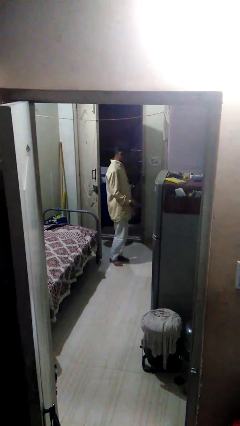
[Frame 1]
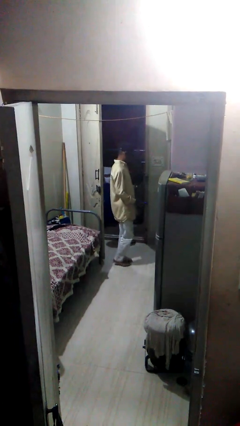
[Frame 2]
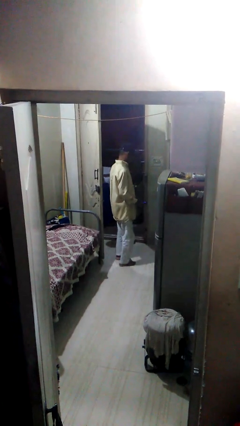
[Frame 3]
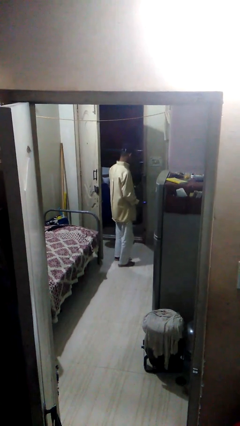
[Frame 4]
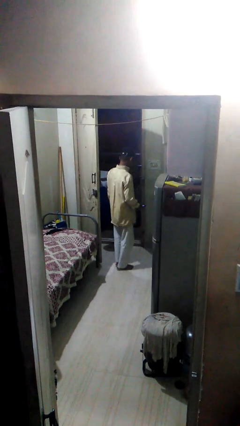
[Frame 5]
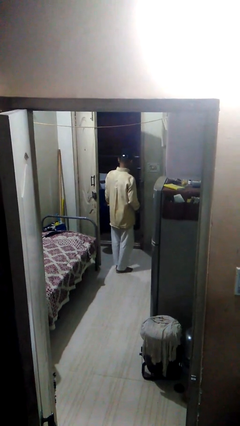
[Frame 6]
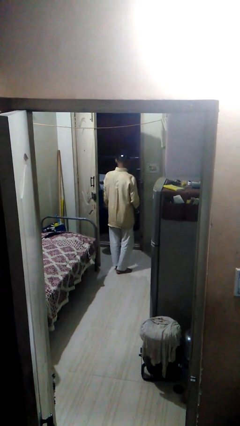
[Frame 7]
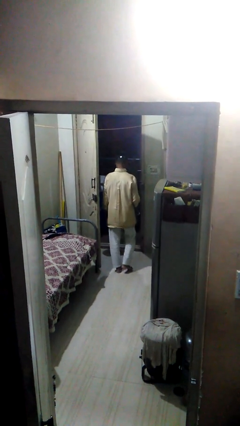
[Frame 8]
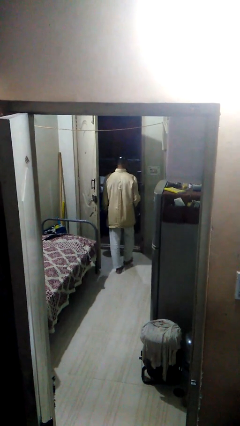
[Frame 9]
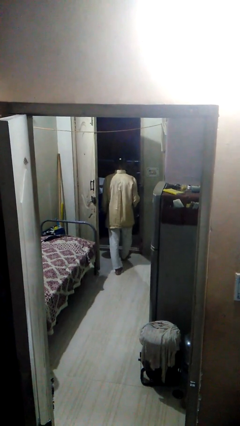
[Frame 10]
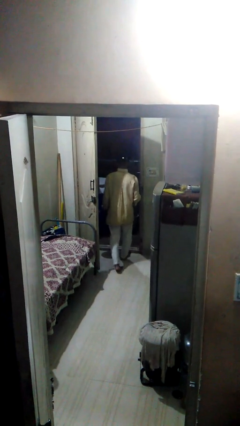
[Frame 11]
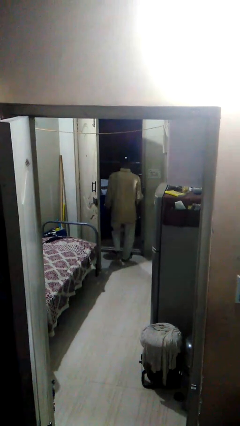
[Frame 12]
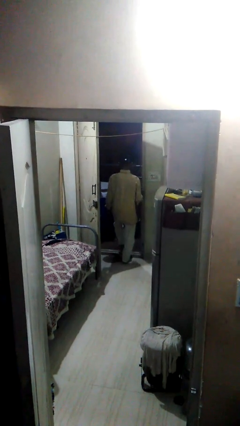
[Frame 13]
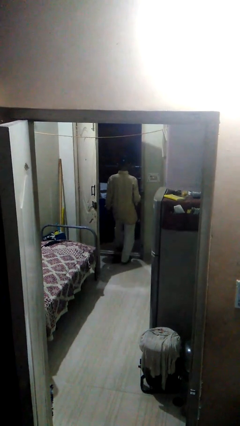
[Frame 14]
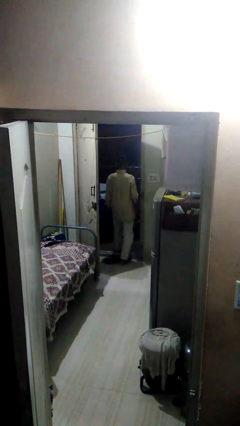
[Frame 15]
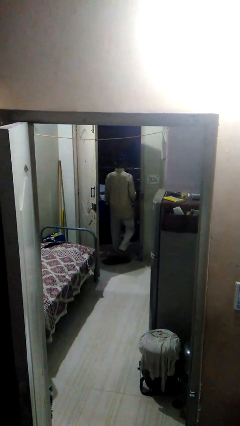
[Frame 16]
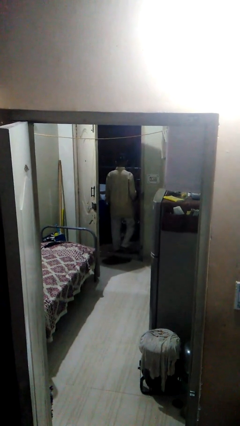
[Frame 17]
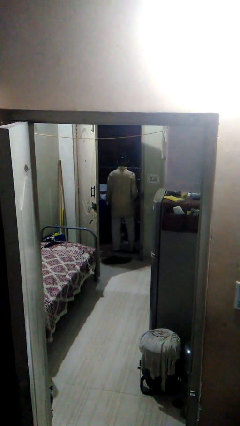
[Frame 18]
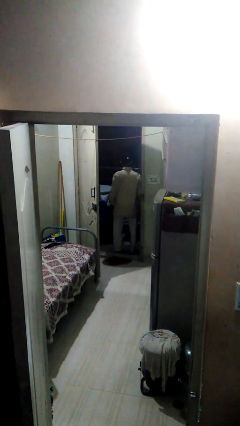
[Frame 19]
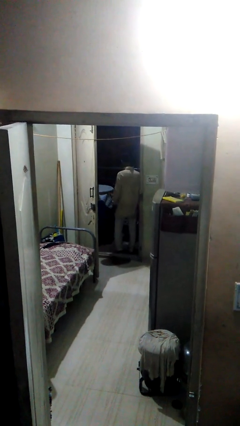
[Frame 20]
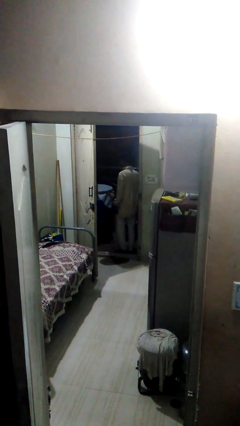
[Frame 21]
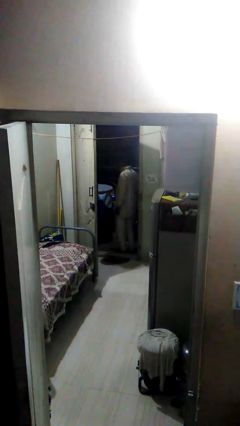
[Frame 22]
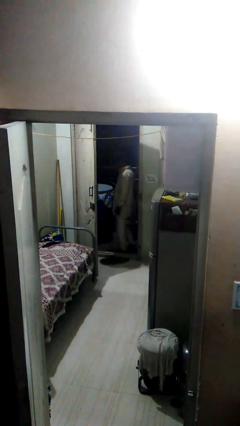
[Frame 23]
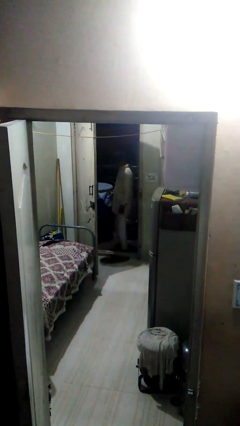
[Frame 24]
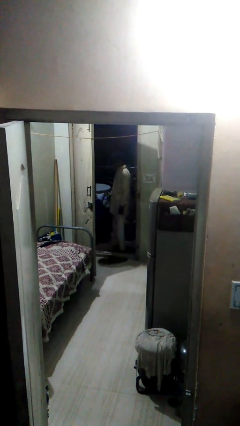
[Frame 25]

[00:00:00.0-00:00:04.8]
person exits scene through structure

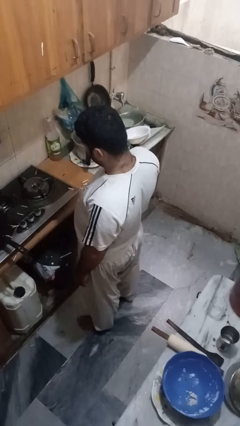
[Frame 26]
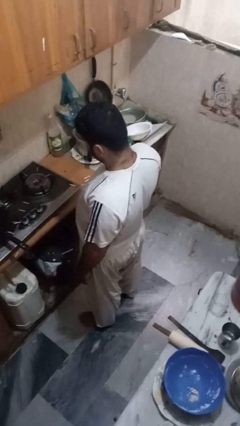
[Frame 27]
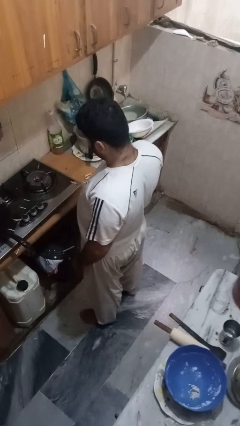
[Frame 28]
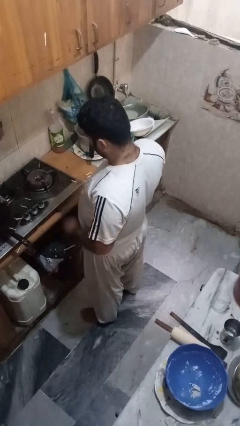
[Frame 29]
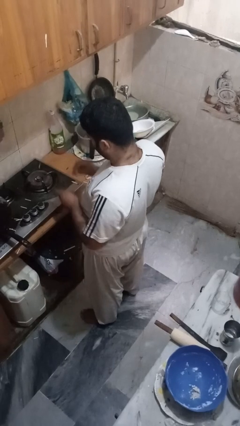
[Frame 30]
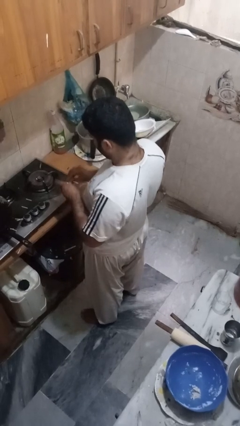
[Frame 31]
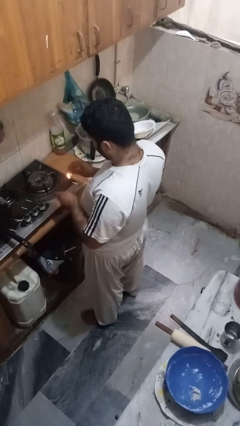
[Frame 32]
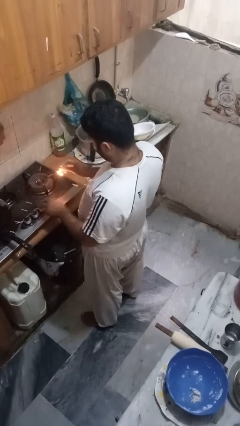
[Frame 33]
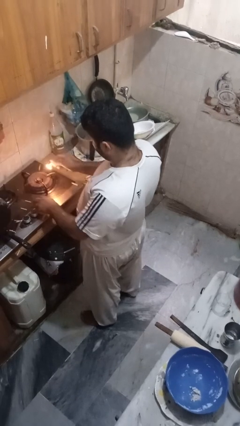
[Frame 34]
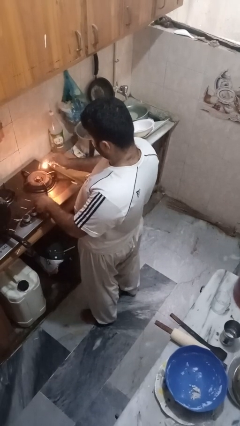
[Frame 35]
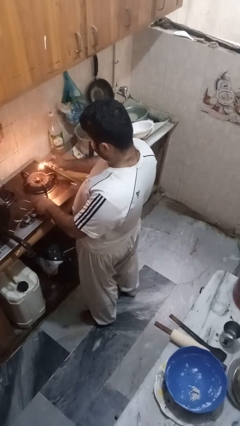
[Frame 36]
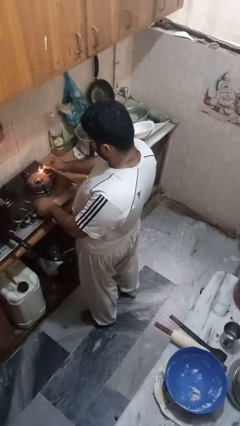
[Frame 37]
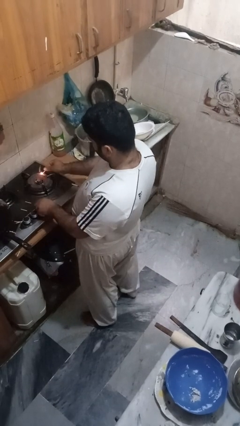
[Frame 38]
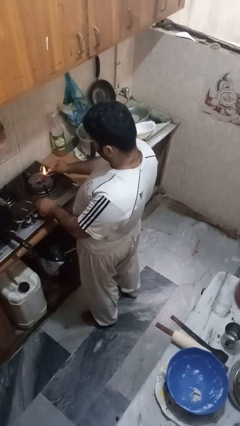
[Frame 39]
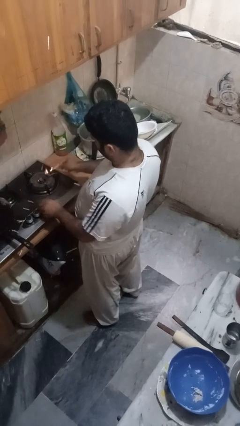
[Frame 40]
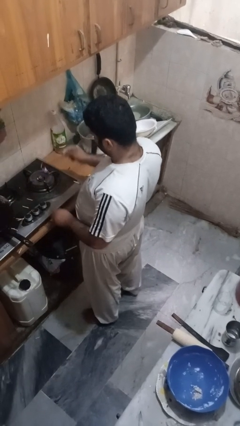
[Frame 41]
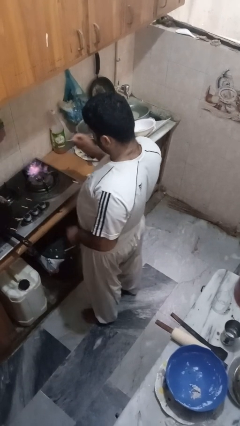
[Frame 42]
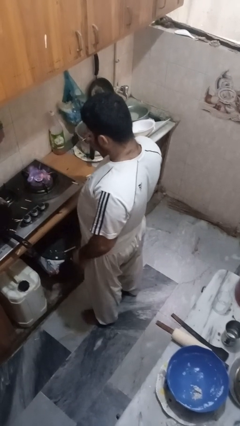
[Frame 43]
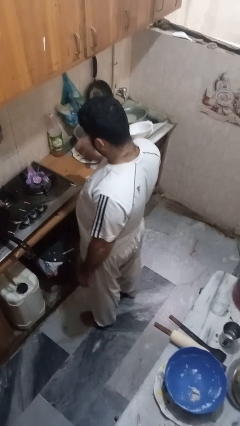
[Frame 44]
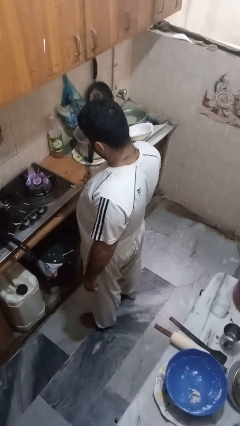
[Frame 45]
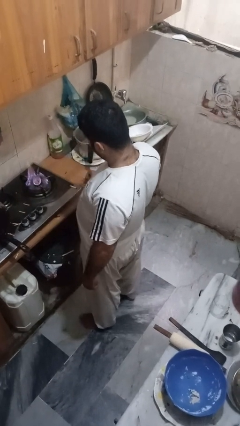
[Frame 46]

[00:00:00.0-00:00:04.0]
person turns on stovetop

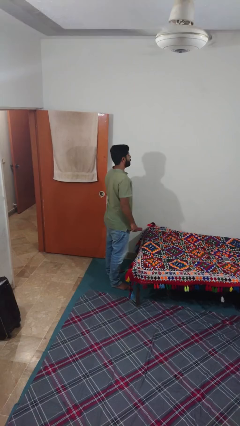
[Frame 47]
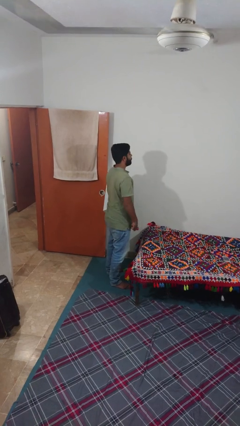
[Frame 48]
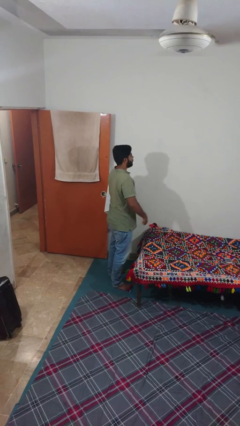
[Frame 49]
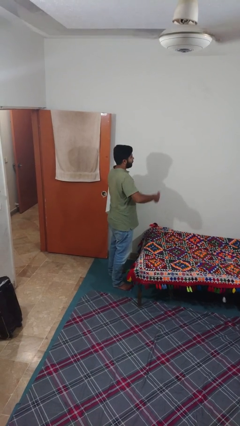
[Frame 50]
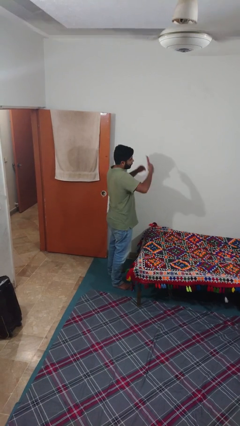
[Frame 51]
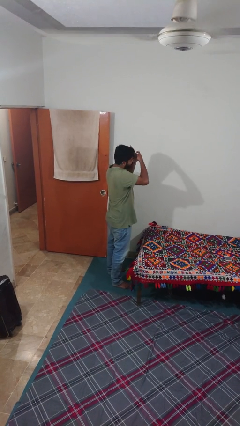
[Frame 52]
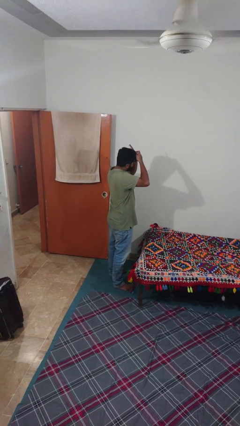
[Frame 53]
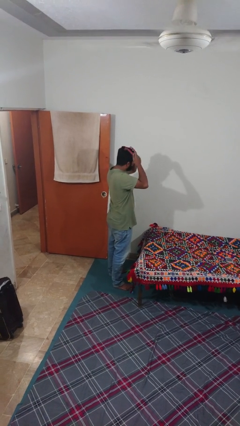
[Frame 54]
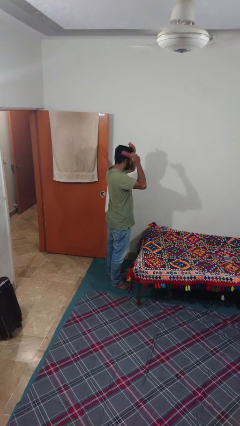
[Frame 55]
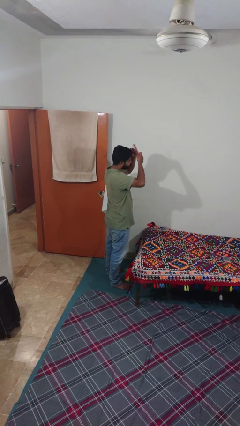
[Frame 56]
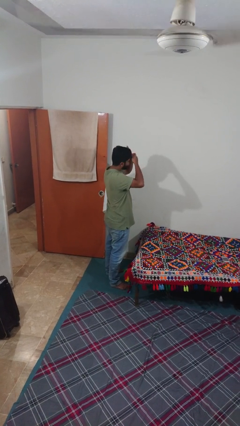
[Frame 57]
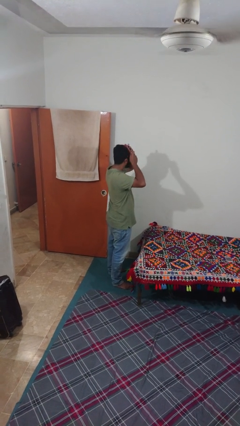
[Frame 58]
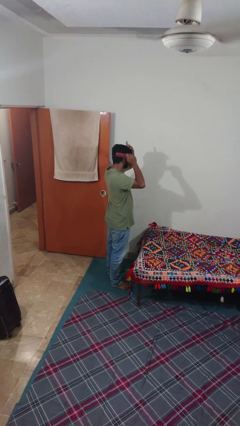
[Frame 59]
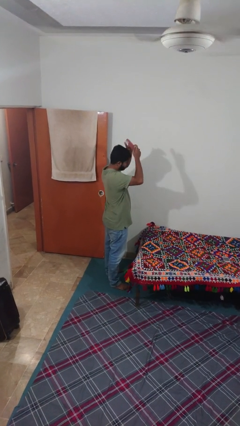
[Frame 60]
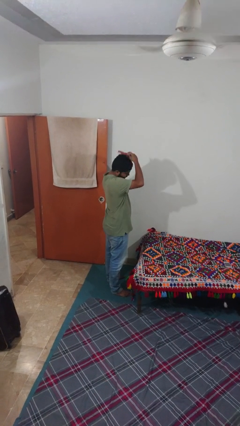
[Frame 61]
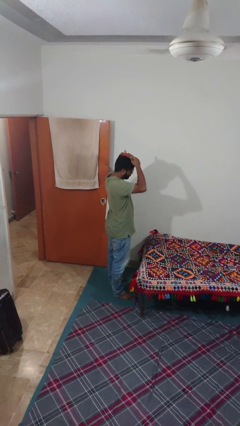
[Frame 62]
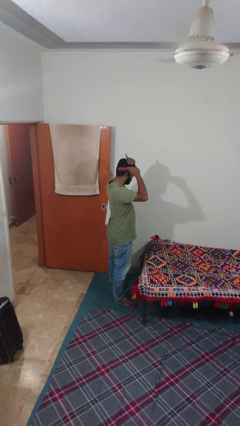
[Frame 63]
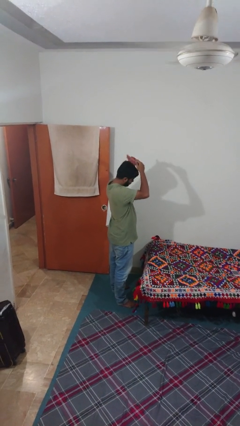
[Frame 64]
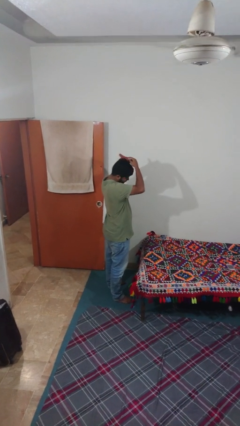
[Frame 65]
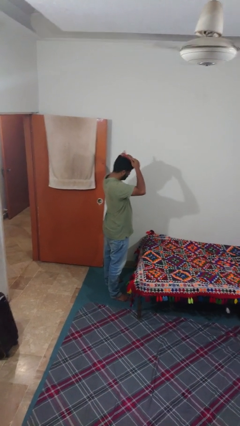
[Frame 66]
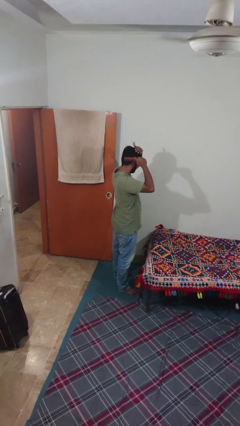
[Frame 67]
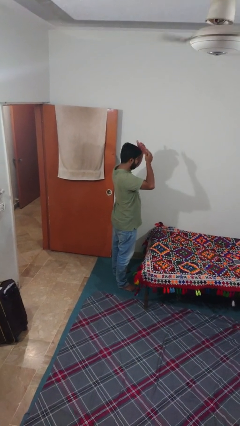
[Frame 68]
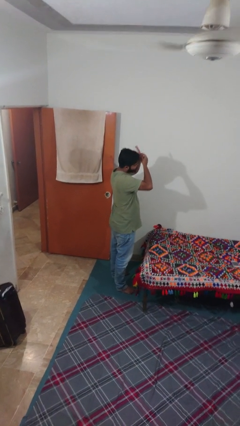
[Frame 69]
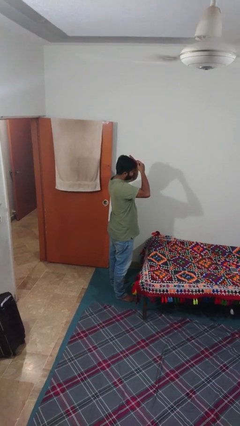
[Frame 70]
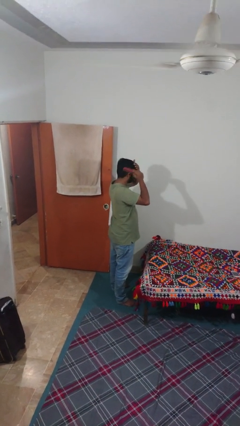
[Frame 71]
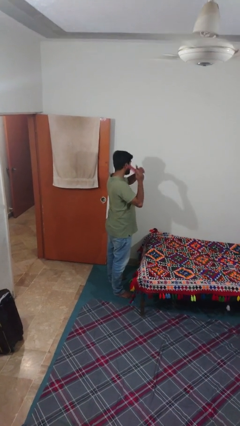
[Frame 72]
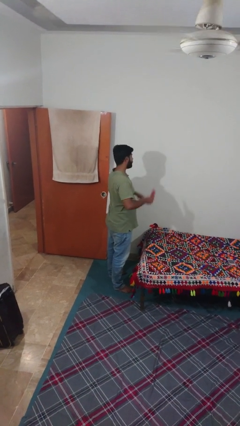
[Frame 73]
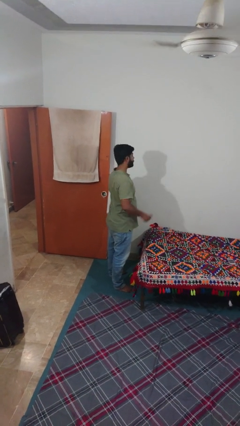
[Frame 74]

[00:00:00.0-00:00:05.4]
person brushes hair

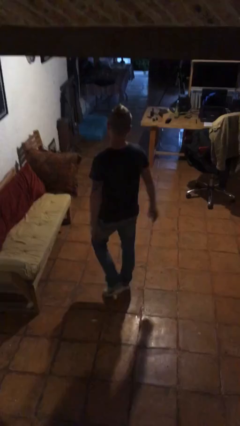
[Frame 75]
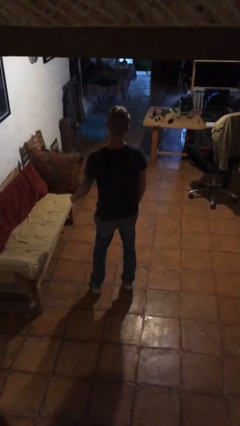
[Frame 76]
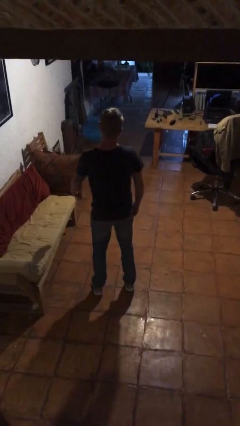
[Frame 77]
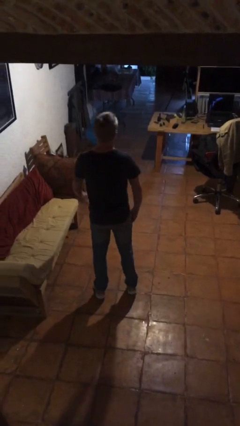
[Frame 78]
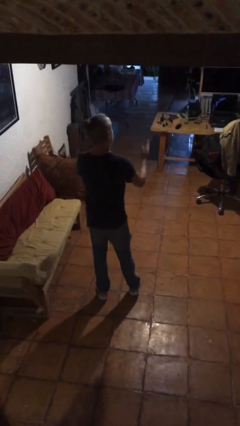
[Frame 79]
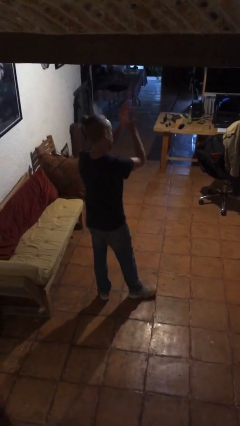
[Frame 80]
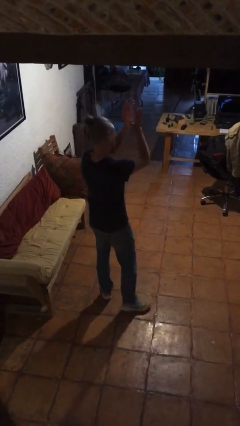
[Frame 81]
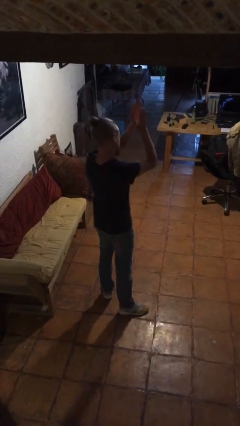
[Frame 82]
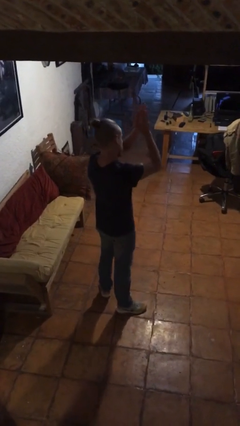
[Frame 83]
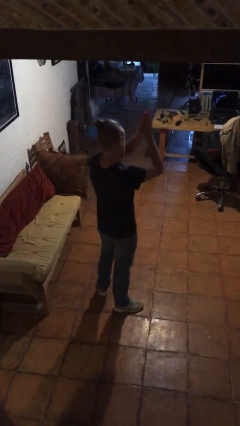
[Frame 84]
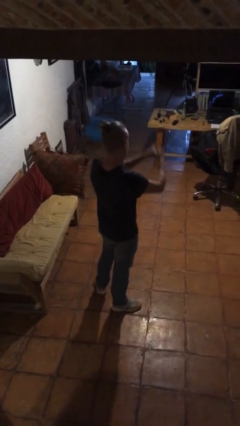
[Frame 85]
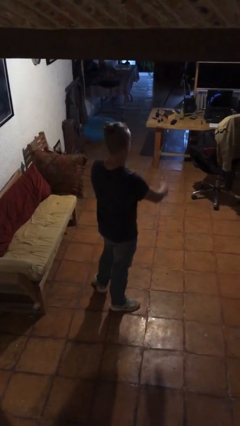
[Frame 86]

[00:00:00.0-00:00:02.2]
person claps hands

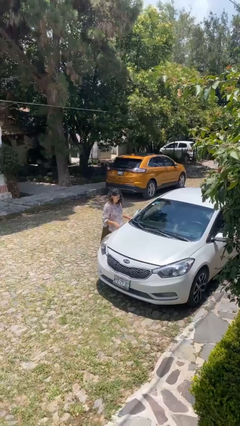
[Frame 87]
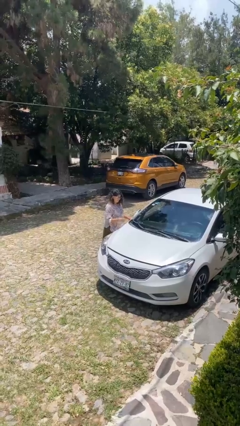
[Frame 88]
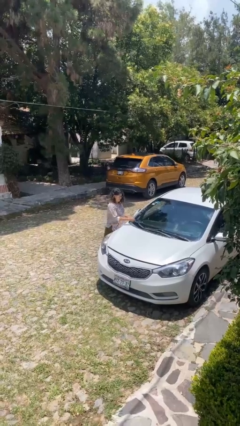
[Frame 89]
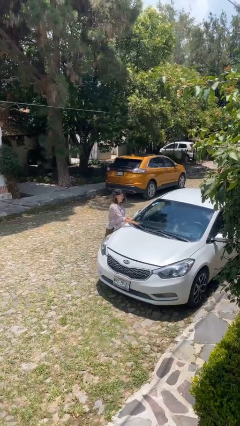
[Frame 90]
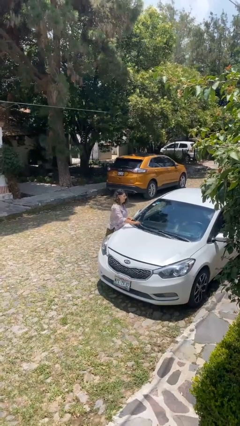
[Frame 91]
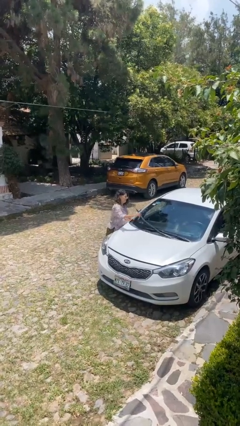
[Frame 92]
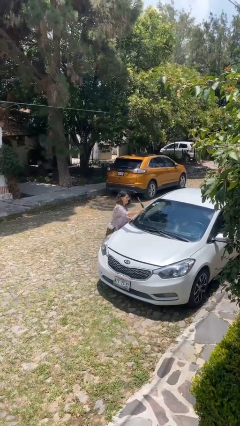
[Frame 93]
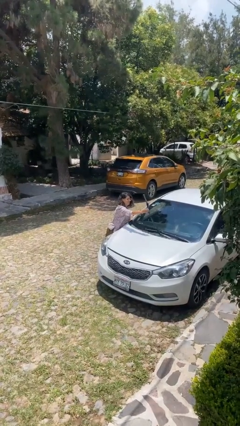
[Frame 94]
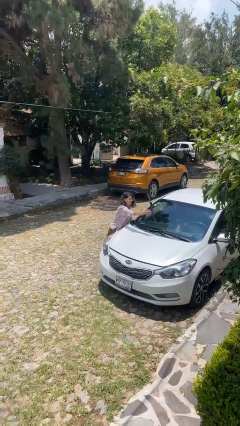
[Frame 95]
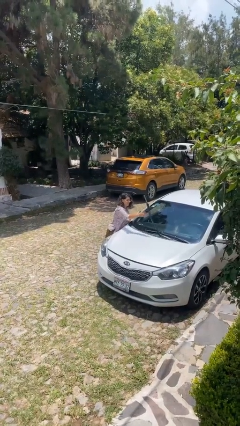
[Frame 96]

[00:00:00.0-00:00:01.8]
person flips up car wipers
